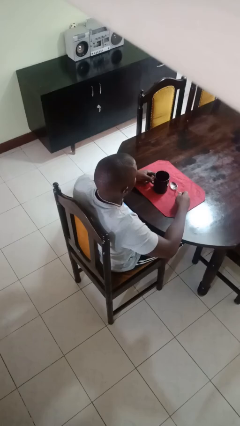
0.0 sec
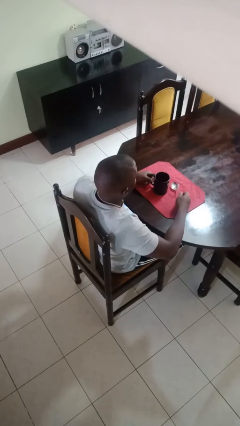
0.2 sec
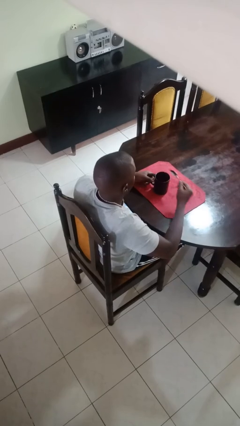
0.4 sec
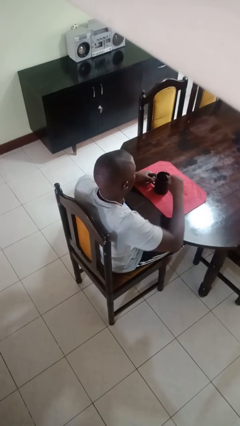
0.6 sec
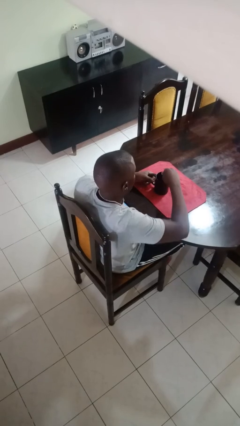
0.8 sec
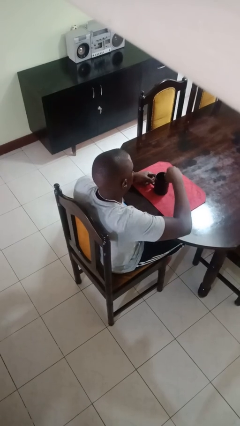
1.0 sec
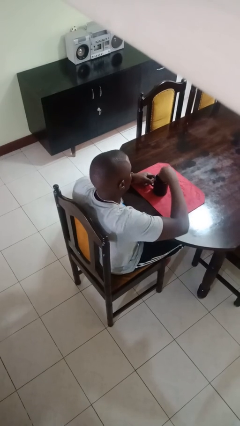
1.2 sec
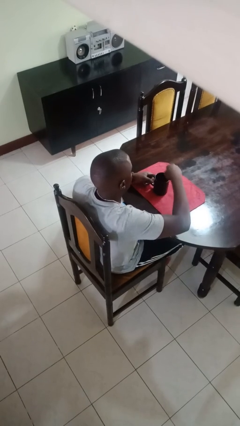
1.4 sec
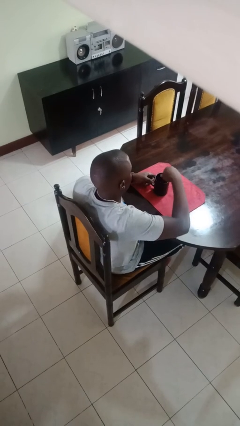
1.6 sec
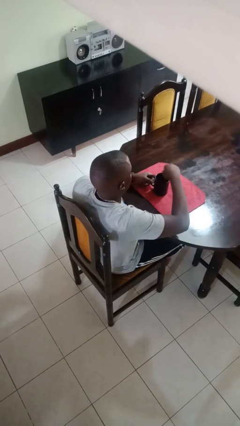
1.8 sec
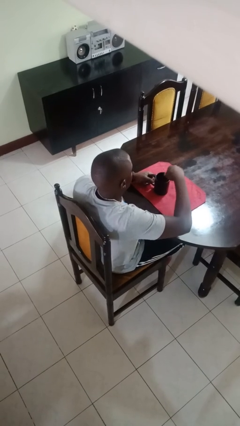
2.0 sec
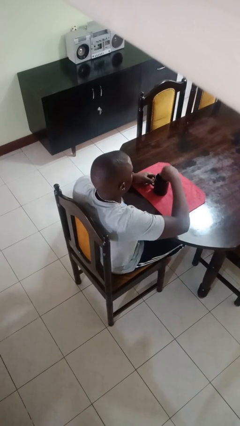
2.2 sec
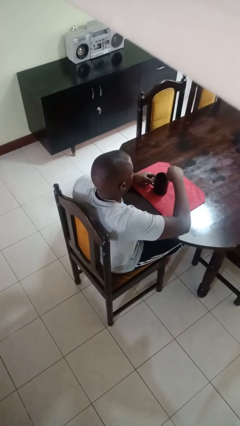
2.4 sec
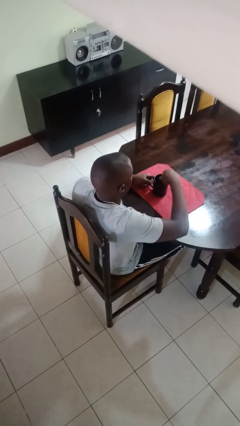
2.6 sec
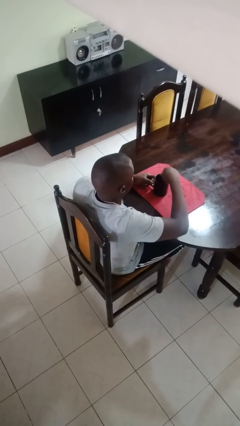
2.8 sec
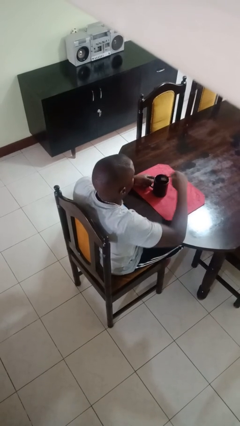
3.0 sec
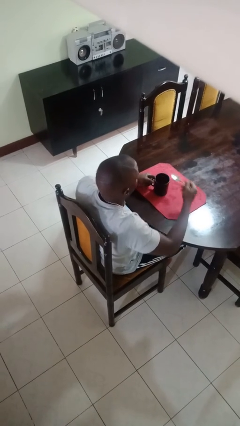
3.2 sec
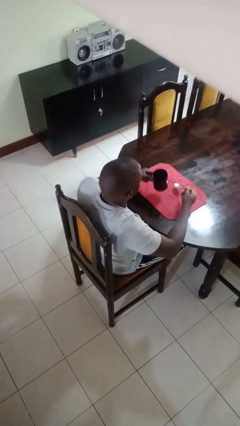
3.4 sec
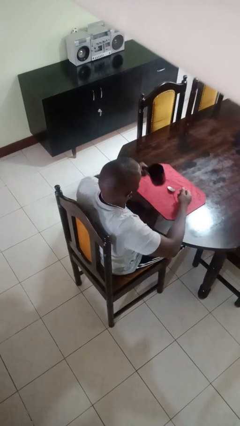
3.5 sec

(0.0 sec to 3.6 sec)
person stirs mug

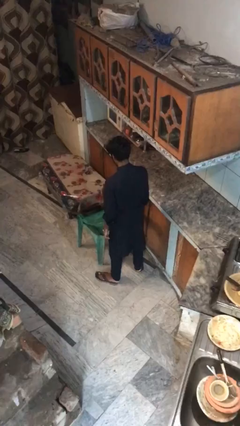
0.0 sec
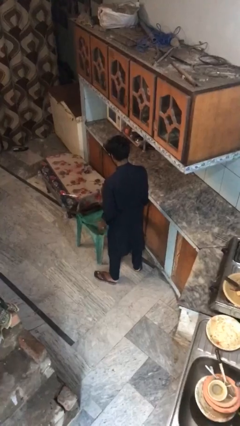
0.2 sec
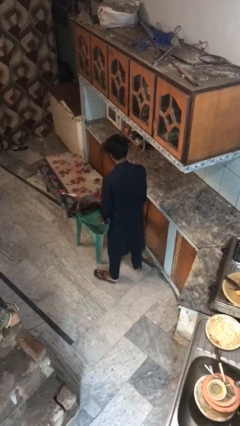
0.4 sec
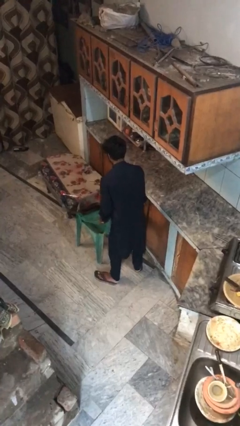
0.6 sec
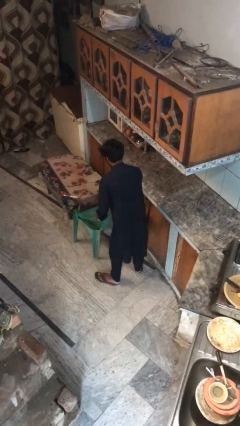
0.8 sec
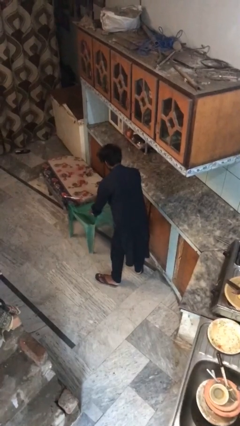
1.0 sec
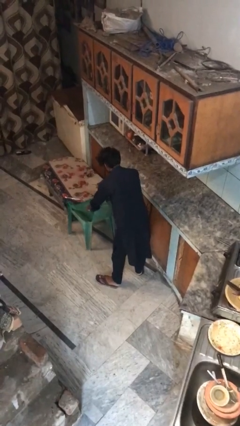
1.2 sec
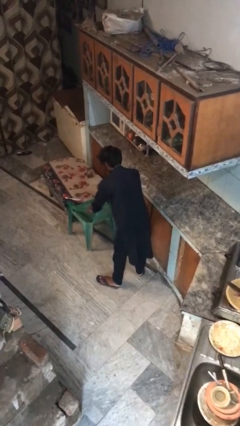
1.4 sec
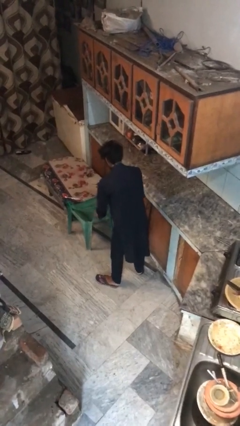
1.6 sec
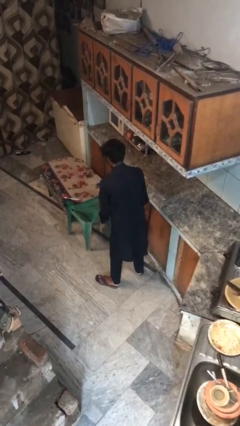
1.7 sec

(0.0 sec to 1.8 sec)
person pushes in chair

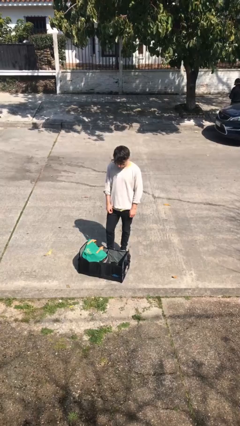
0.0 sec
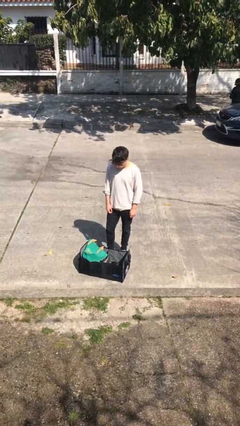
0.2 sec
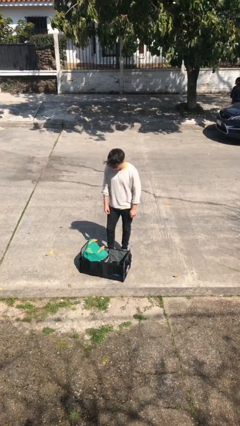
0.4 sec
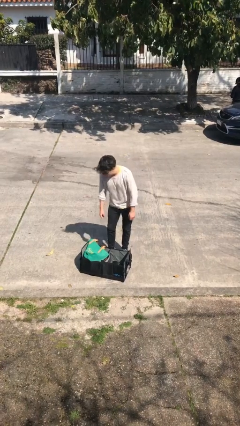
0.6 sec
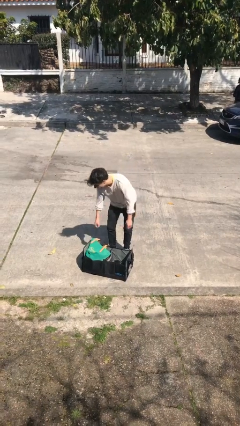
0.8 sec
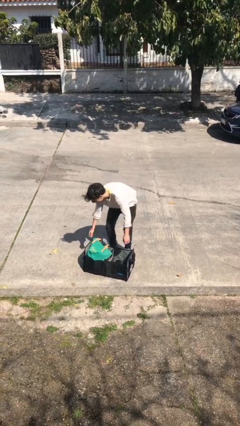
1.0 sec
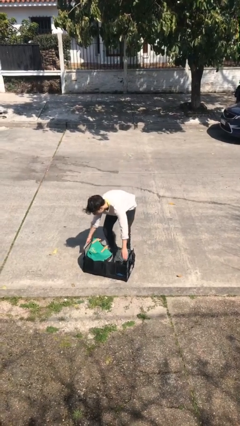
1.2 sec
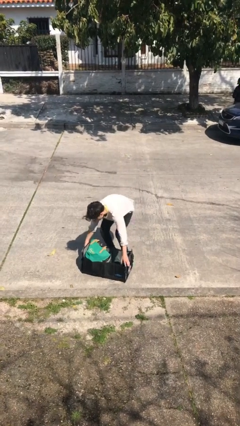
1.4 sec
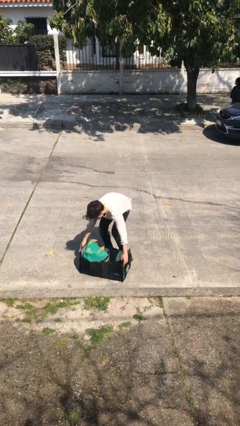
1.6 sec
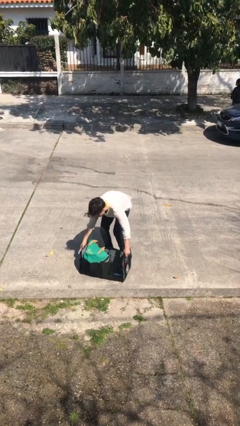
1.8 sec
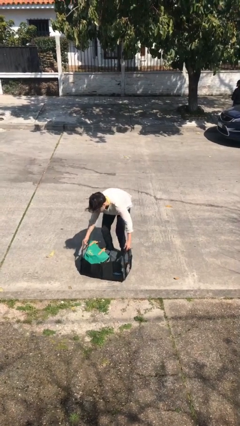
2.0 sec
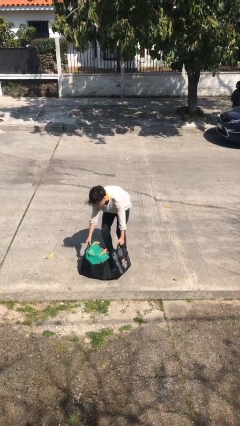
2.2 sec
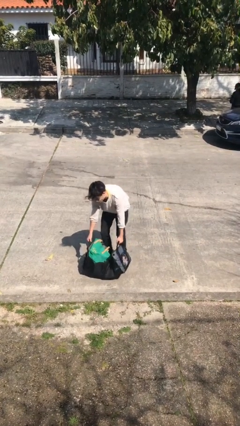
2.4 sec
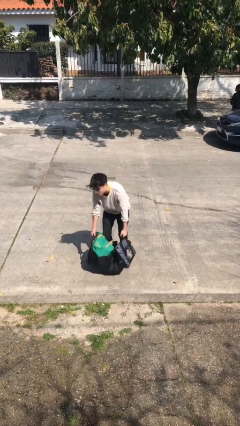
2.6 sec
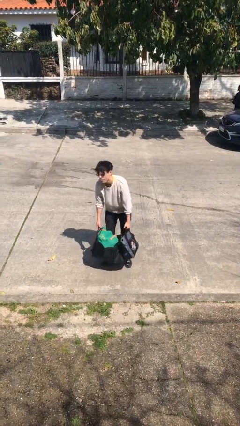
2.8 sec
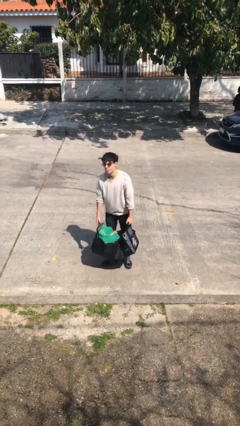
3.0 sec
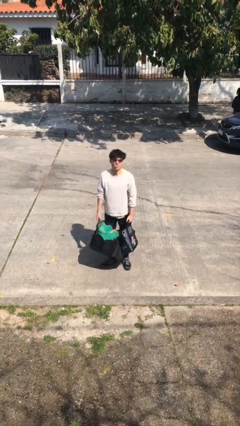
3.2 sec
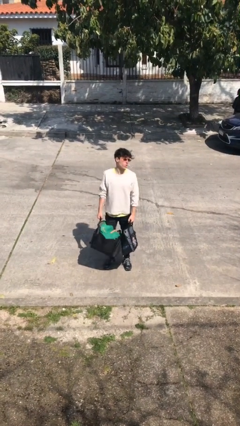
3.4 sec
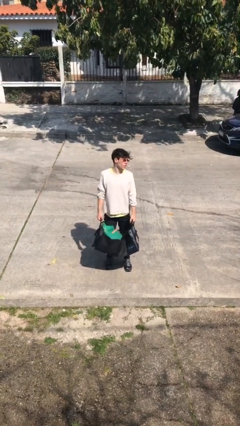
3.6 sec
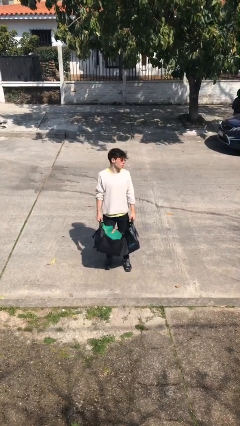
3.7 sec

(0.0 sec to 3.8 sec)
person picks up object from floor

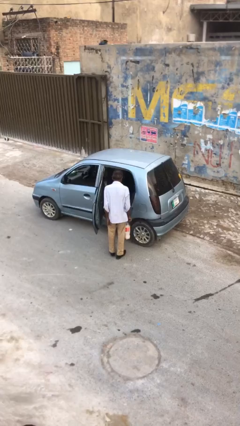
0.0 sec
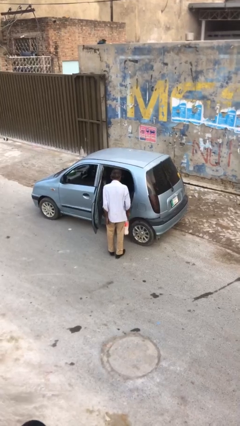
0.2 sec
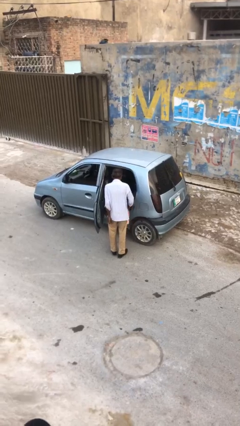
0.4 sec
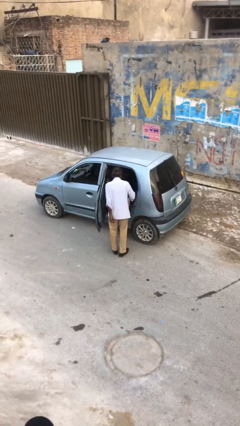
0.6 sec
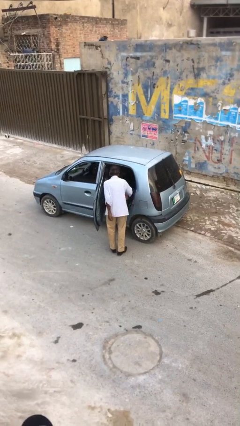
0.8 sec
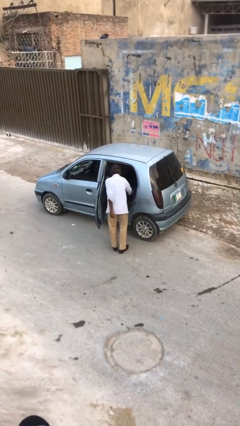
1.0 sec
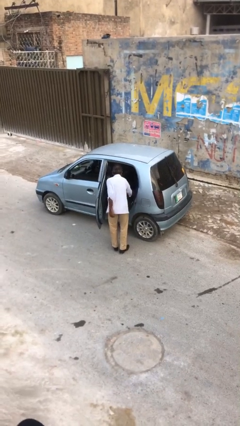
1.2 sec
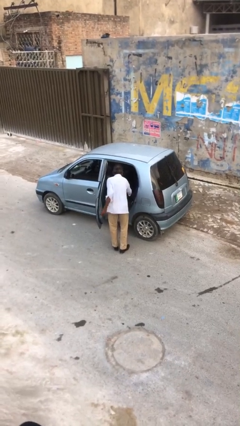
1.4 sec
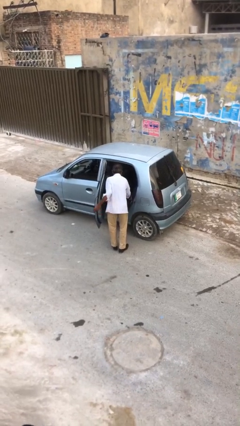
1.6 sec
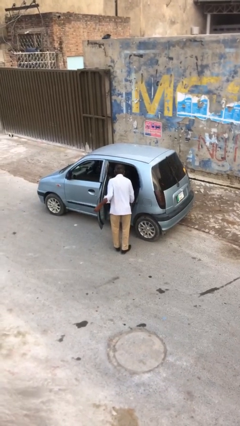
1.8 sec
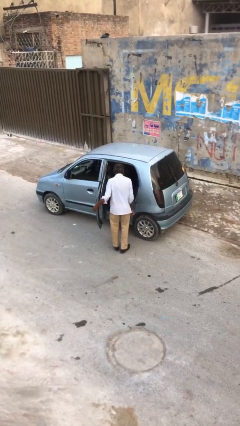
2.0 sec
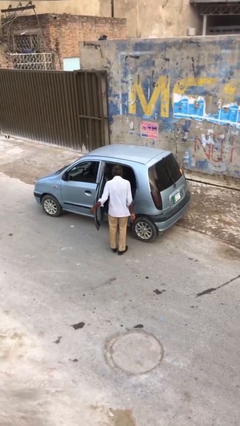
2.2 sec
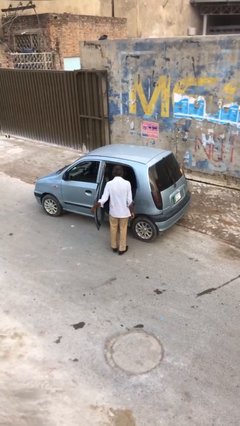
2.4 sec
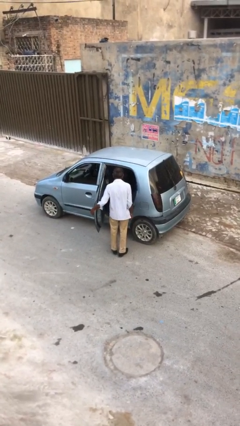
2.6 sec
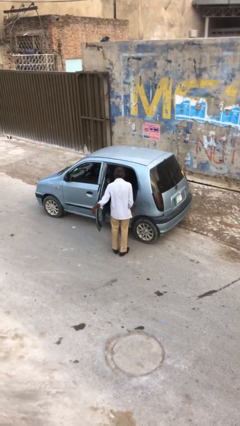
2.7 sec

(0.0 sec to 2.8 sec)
person loads car

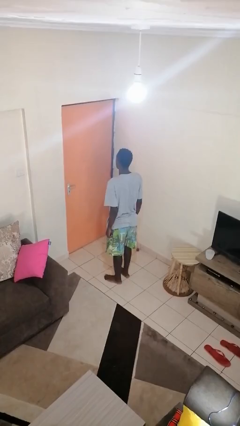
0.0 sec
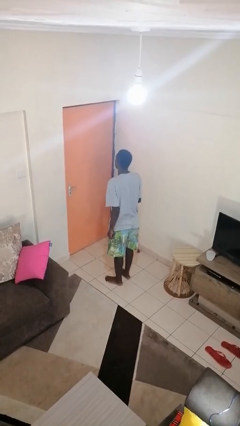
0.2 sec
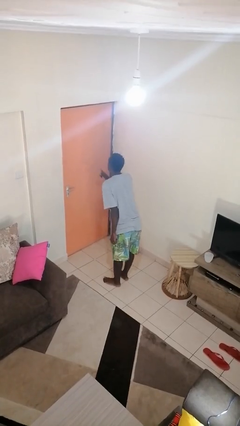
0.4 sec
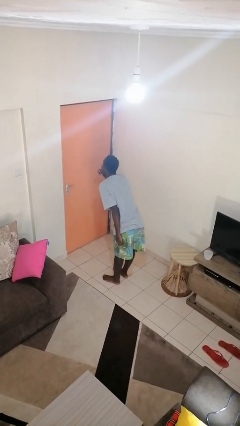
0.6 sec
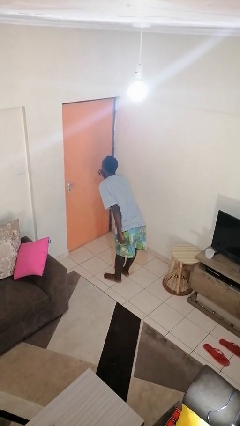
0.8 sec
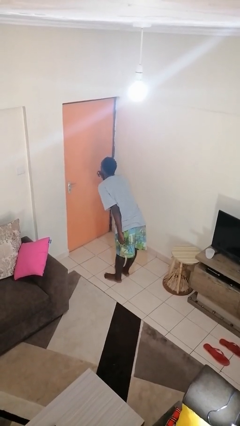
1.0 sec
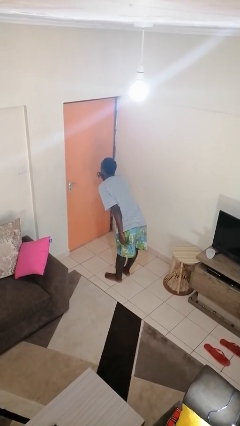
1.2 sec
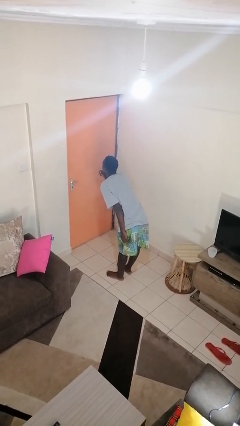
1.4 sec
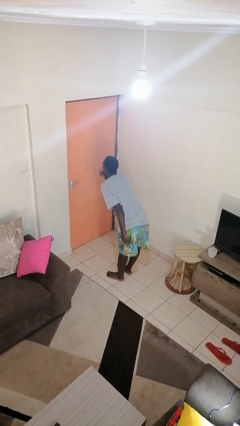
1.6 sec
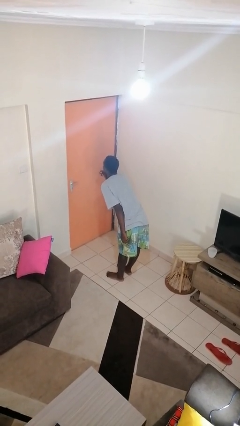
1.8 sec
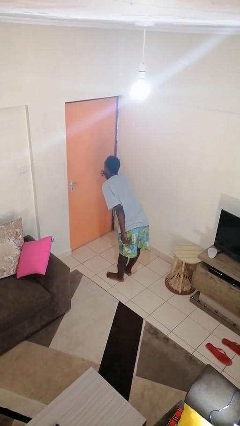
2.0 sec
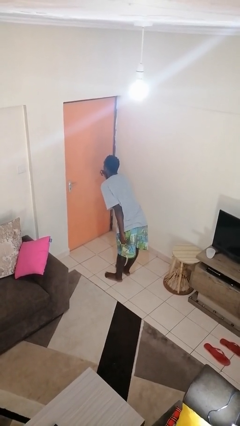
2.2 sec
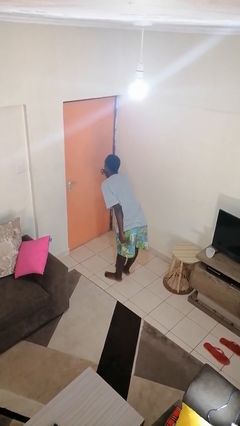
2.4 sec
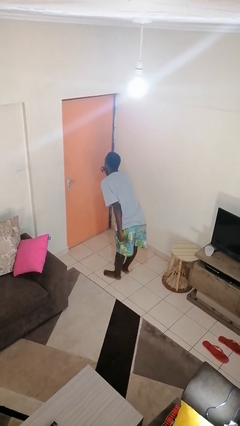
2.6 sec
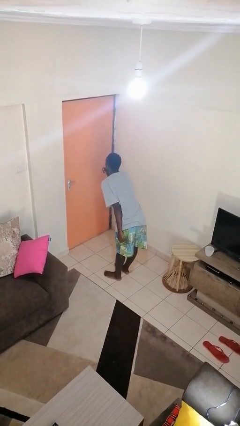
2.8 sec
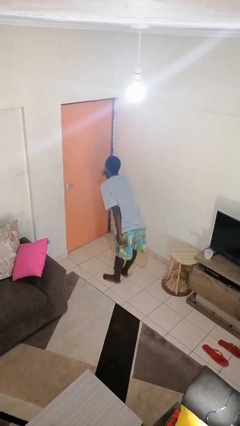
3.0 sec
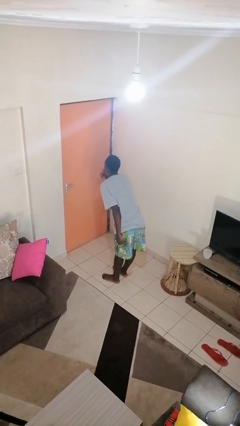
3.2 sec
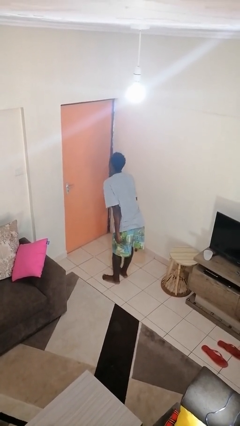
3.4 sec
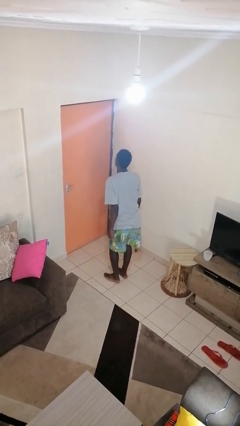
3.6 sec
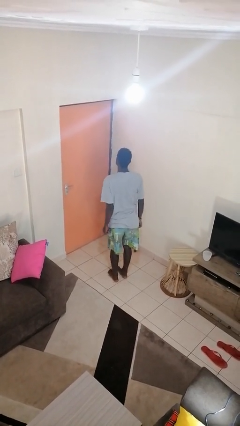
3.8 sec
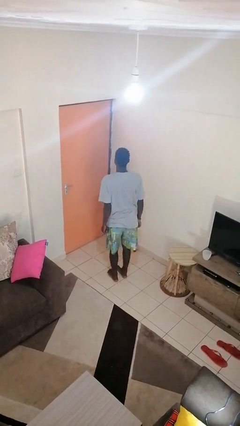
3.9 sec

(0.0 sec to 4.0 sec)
person gestures be quiet

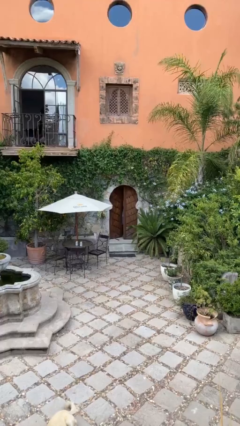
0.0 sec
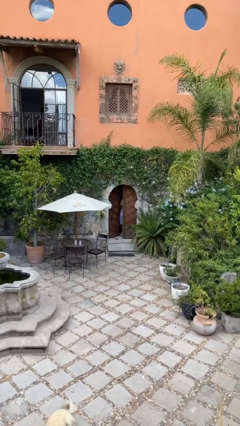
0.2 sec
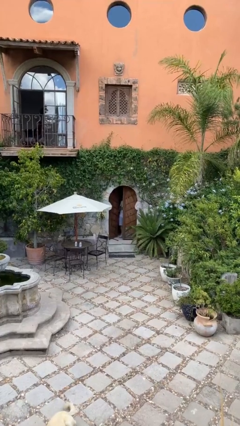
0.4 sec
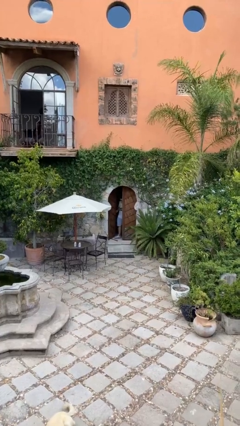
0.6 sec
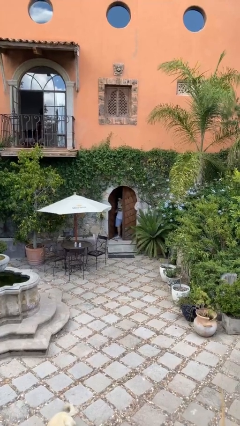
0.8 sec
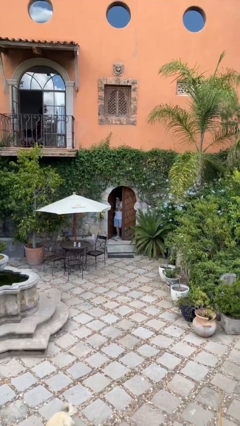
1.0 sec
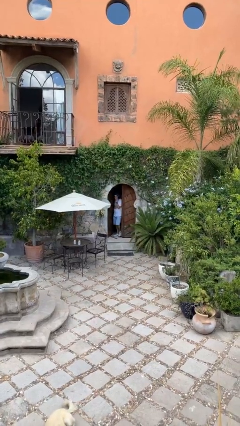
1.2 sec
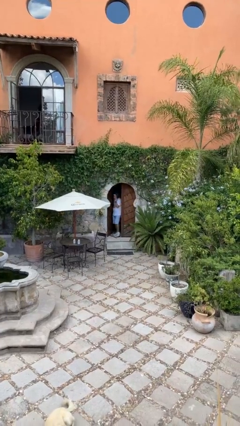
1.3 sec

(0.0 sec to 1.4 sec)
person opens facility door

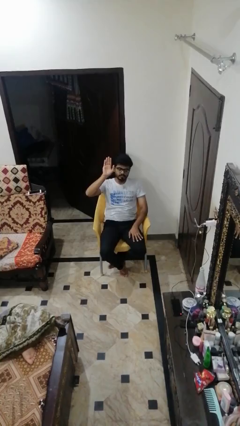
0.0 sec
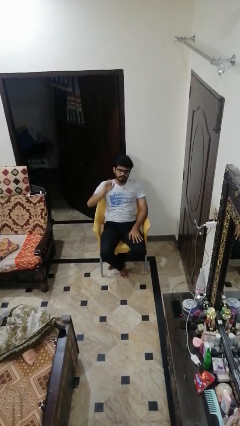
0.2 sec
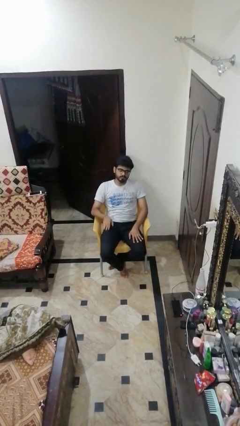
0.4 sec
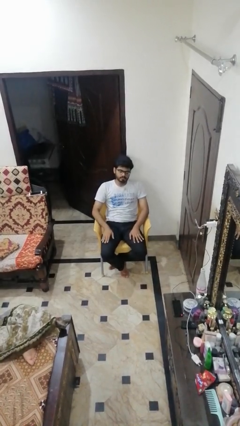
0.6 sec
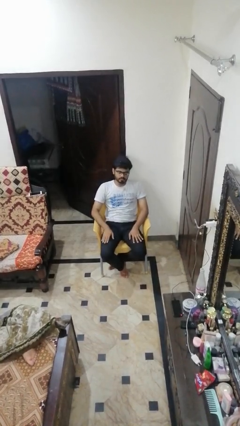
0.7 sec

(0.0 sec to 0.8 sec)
person gestures lower hand
